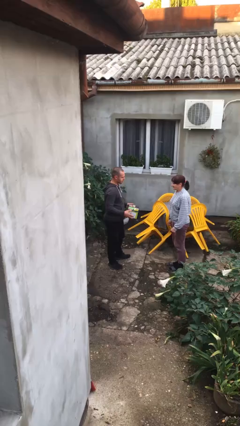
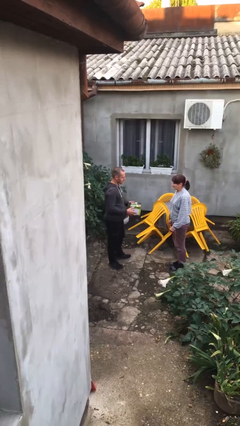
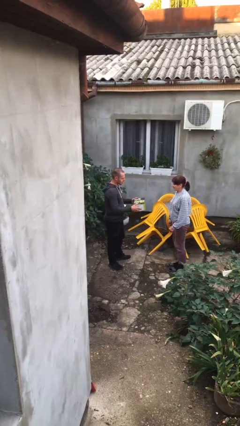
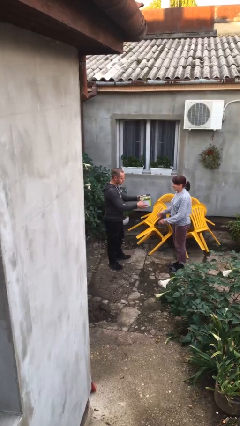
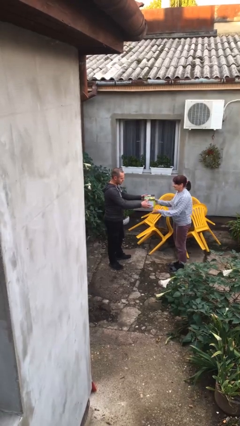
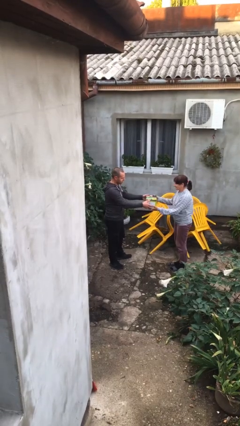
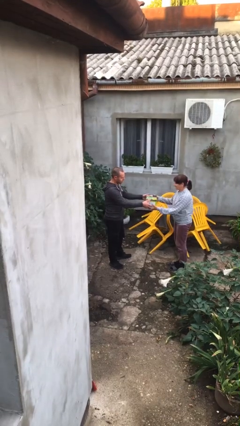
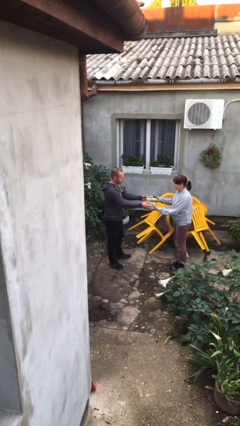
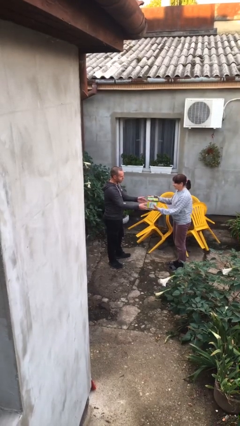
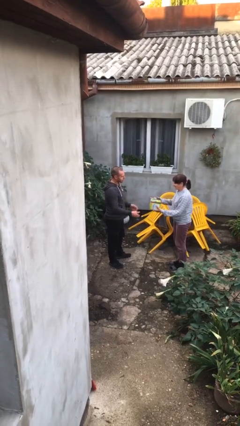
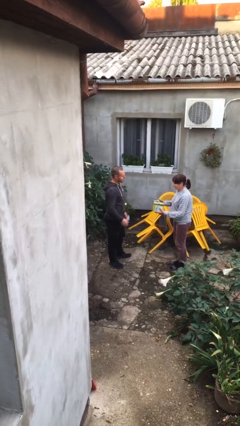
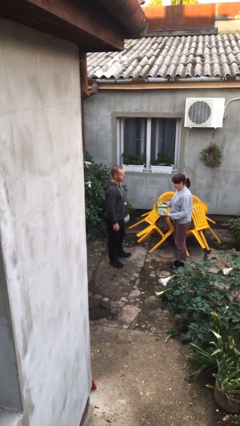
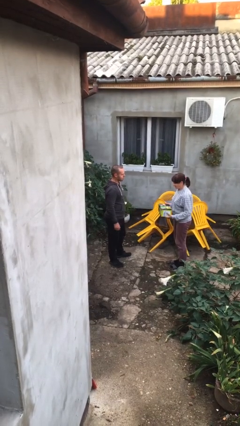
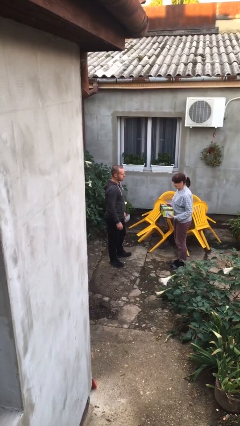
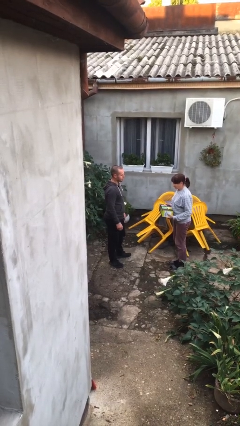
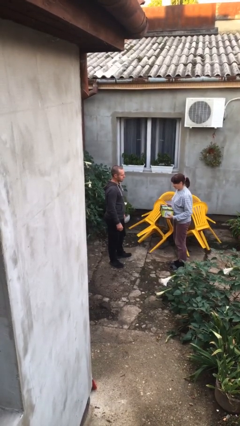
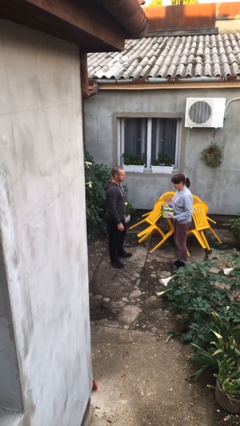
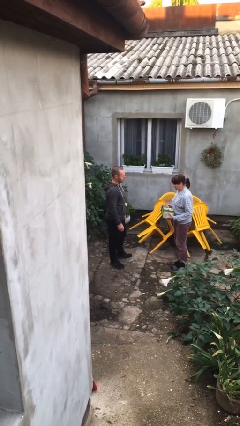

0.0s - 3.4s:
person transfers object to person

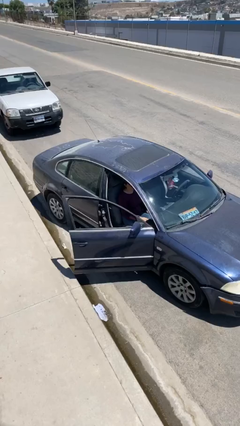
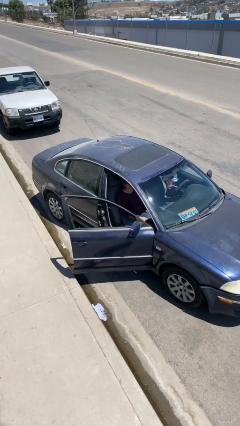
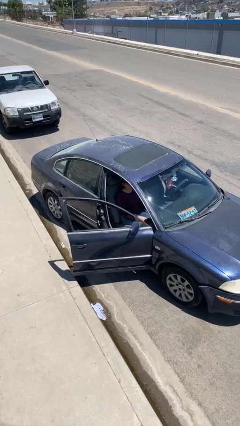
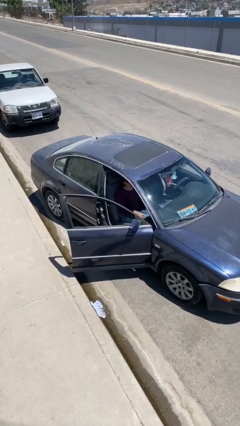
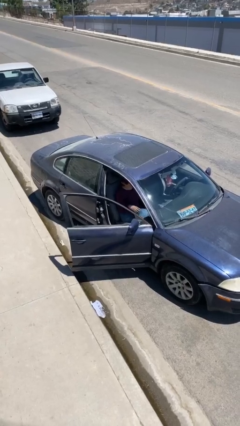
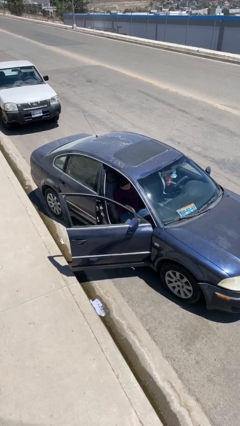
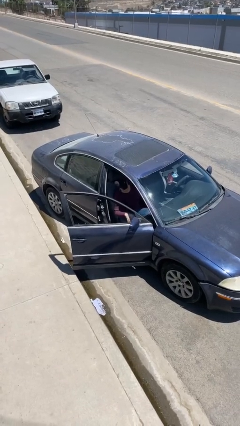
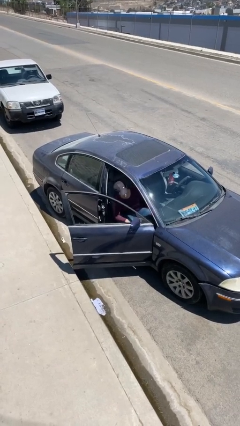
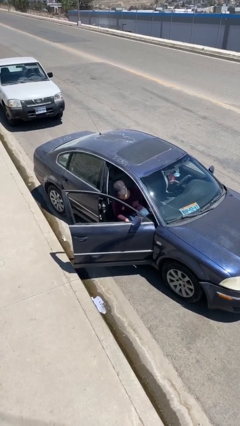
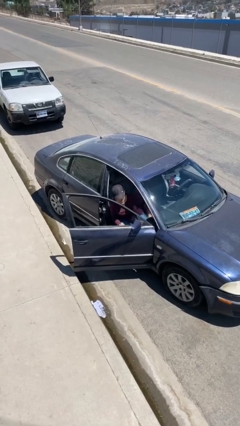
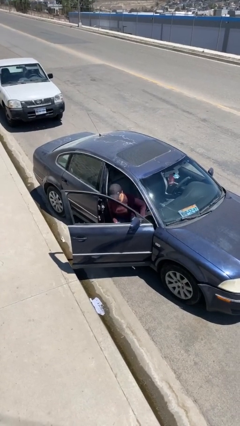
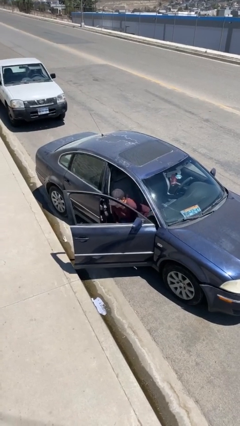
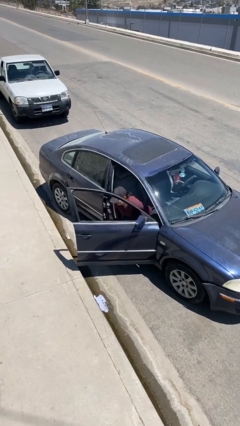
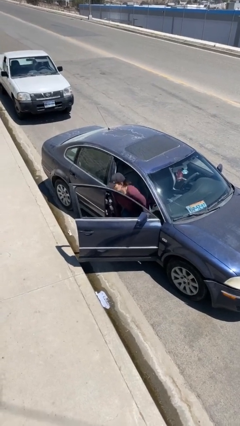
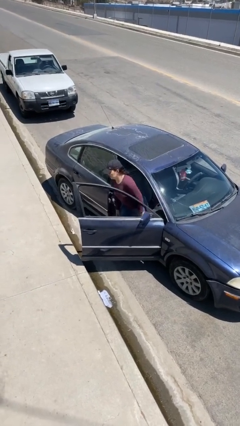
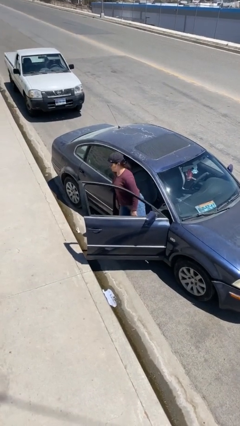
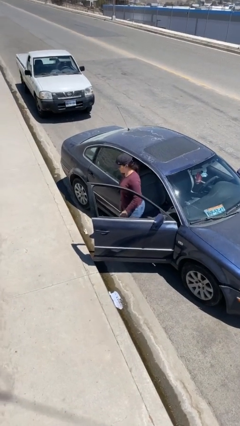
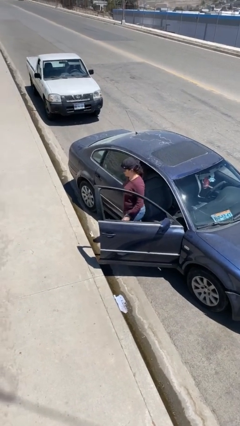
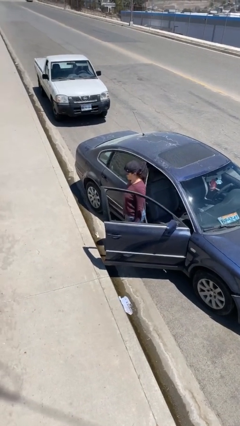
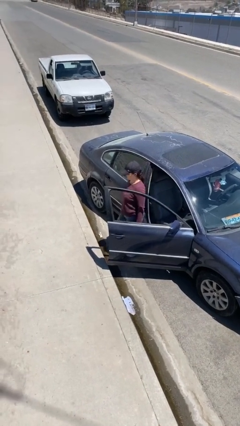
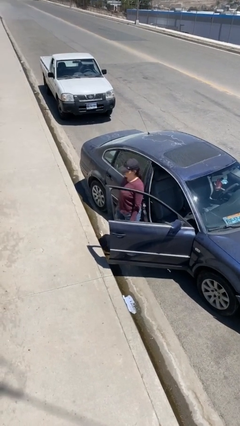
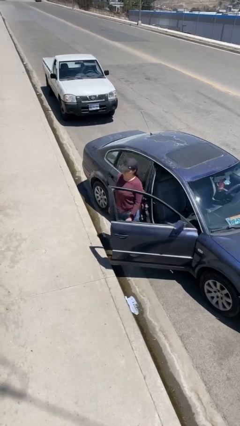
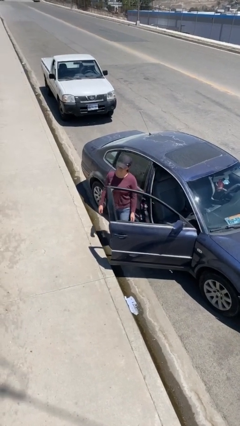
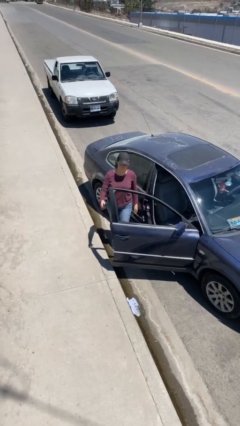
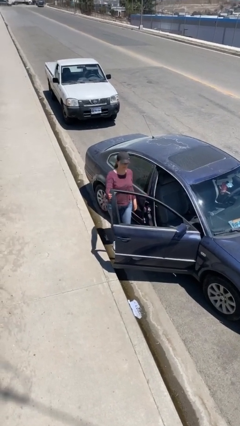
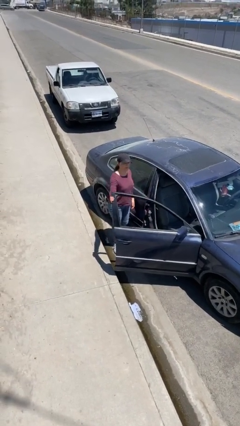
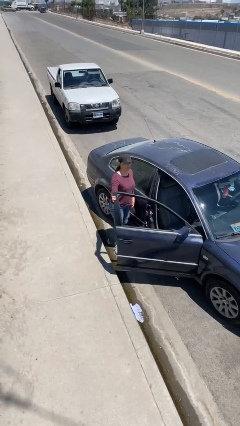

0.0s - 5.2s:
person exits car

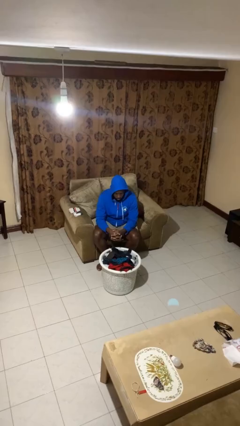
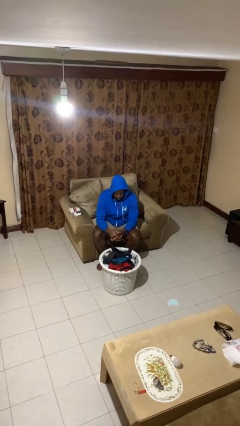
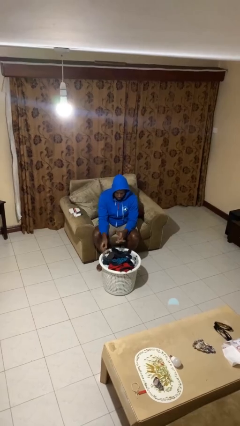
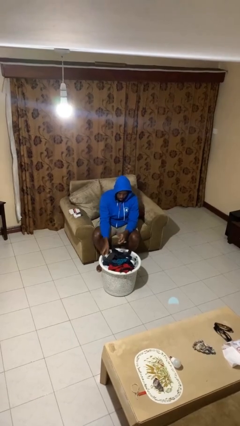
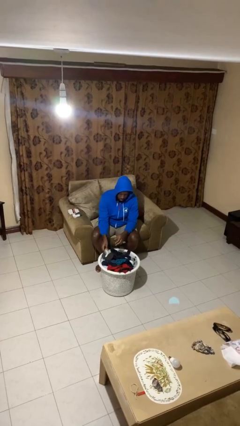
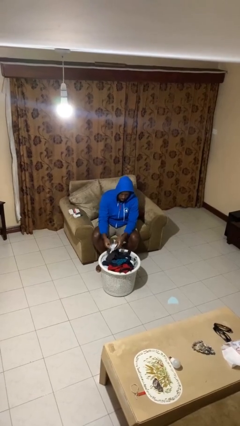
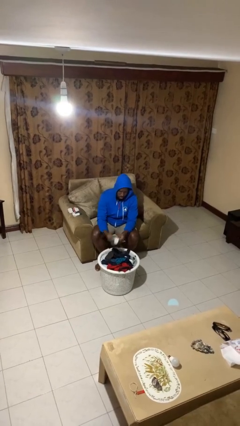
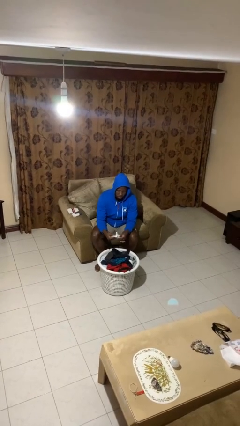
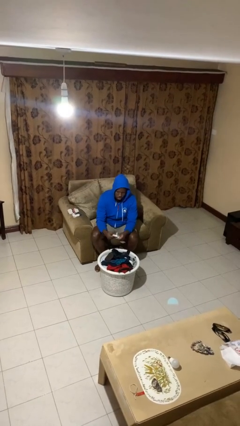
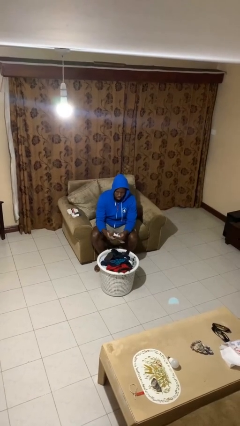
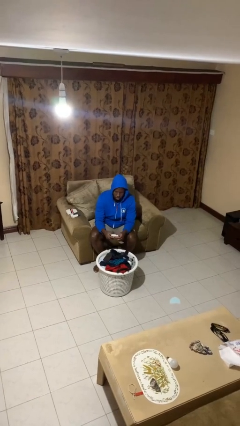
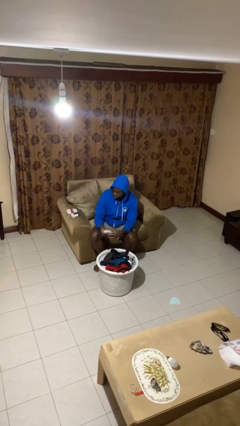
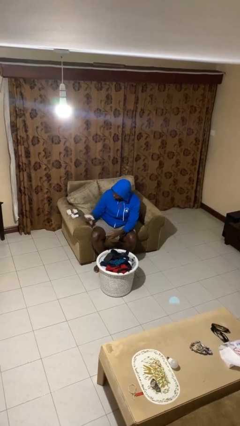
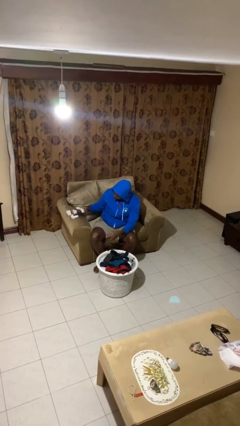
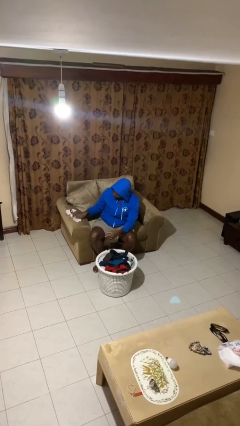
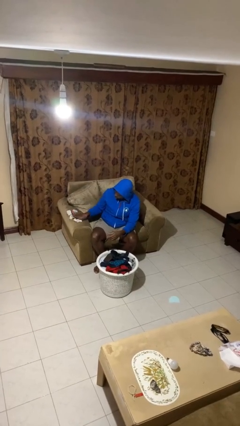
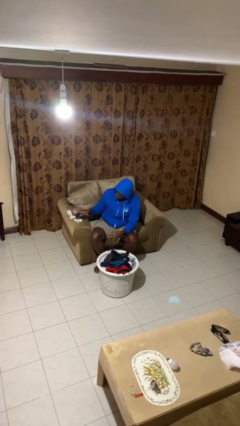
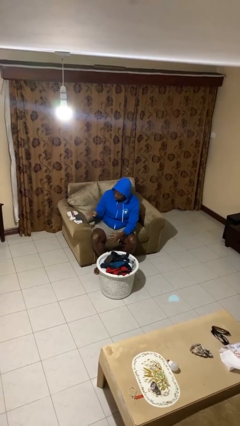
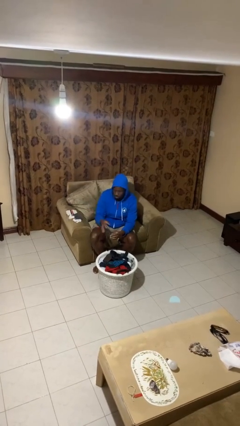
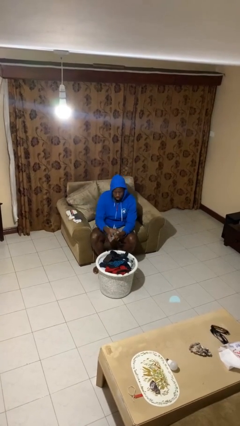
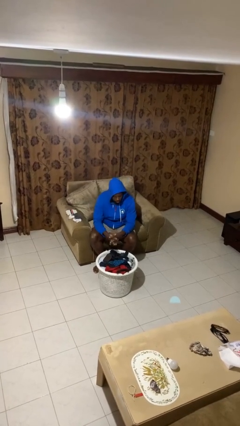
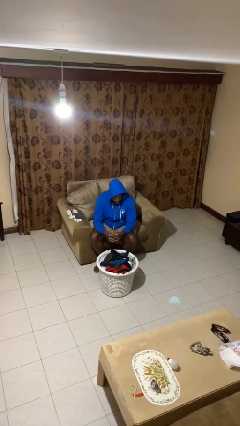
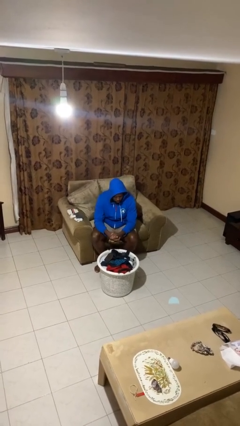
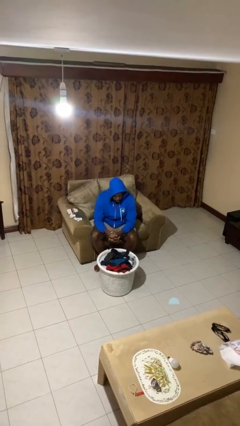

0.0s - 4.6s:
person folds socks

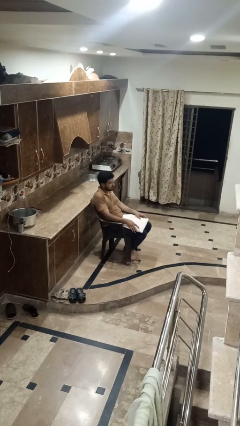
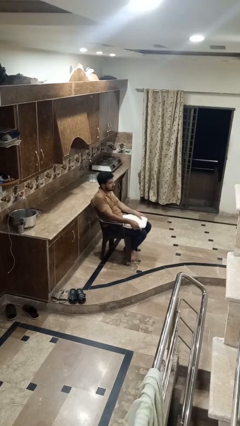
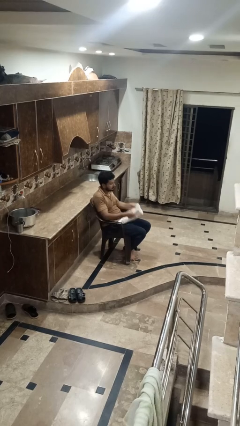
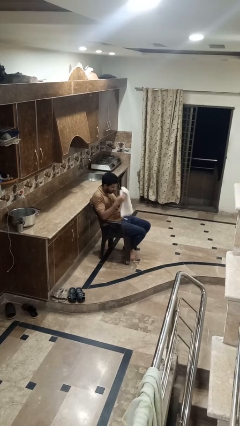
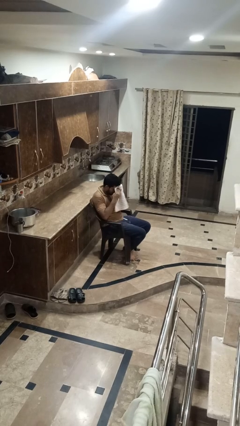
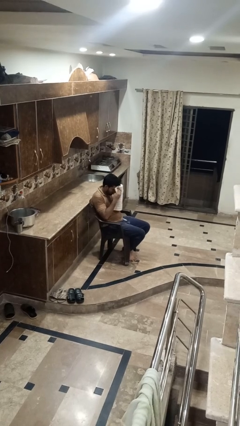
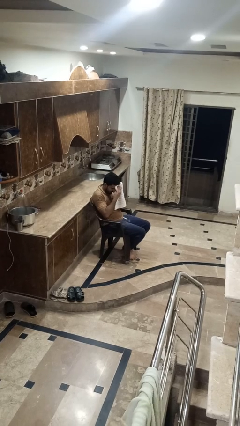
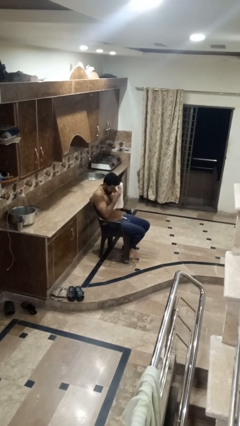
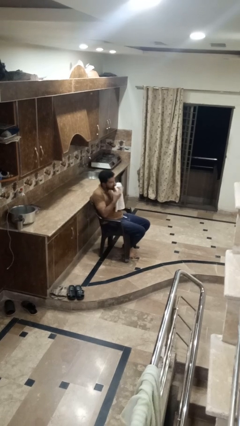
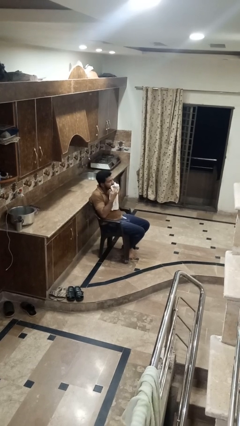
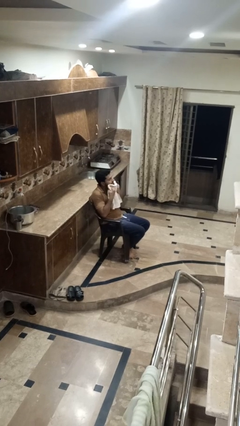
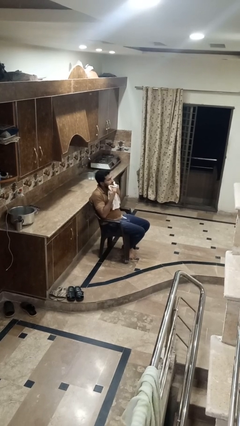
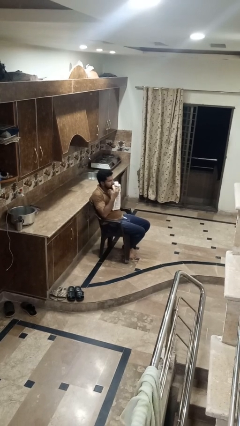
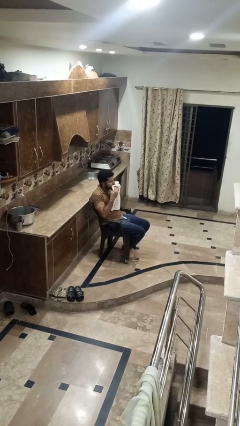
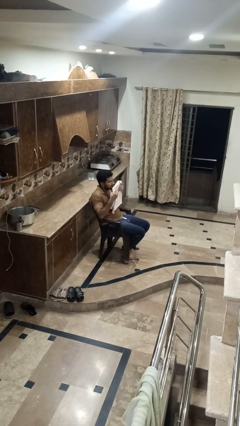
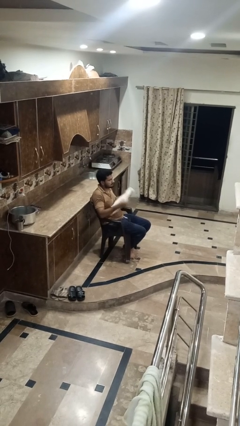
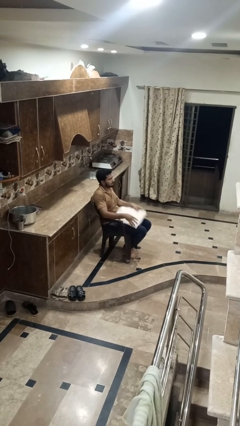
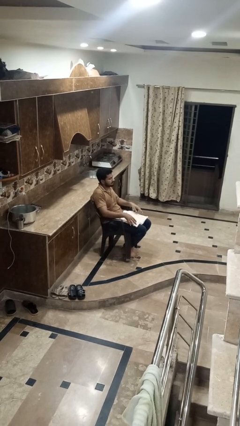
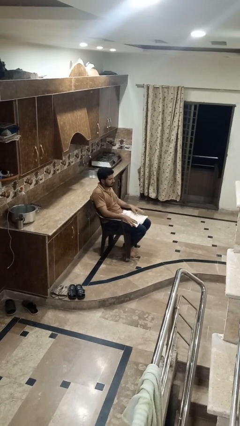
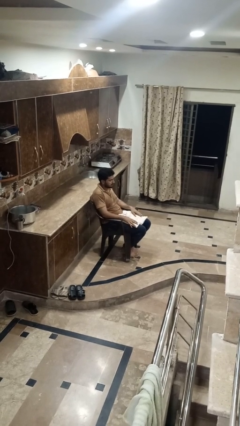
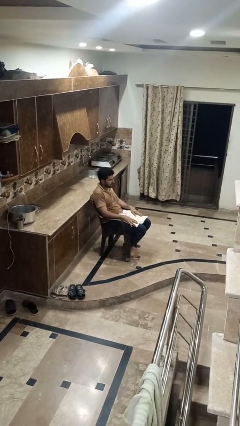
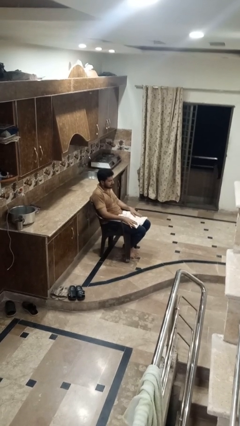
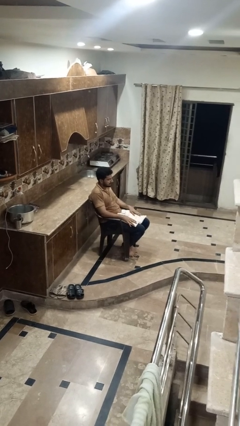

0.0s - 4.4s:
person wipes mouth with napkin
